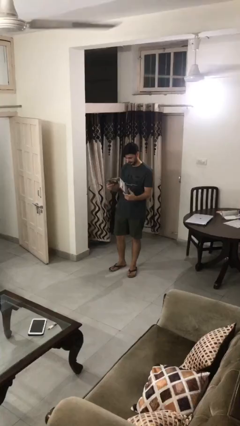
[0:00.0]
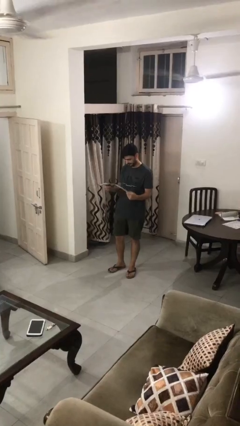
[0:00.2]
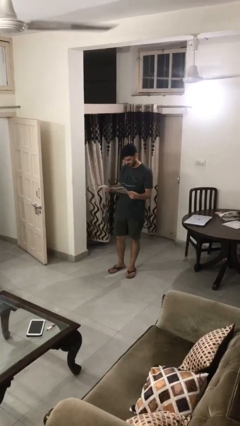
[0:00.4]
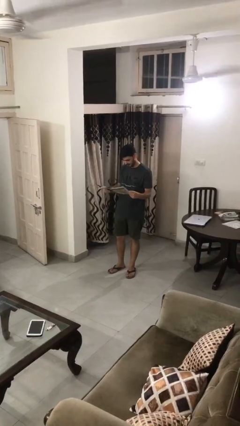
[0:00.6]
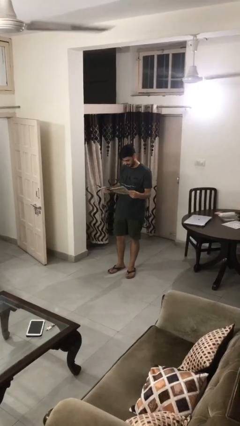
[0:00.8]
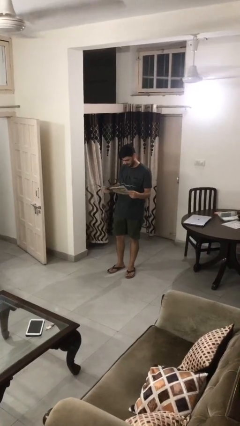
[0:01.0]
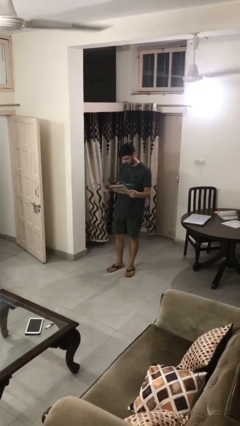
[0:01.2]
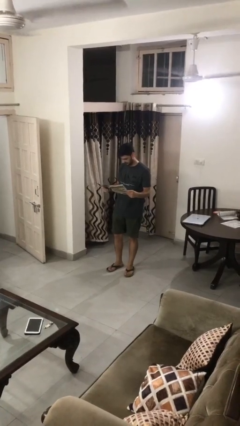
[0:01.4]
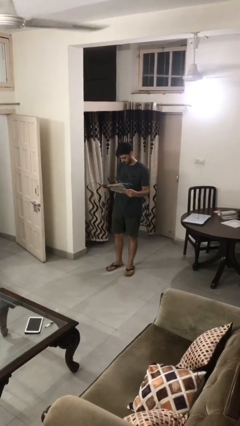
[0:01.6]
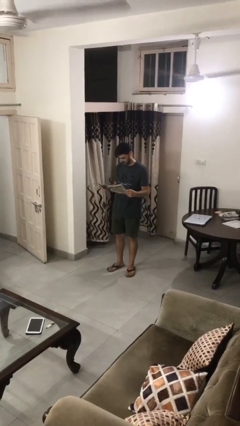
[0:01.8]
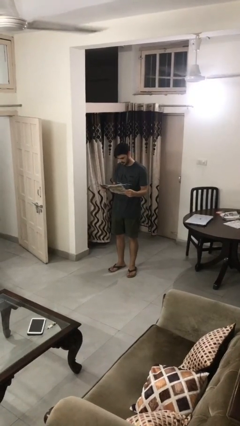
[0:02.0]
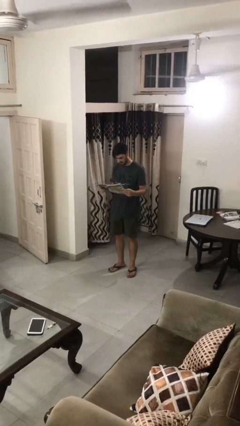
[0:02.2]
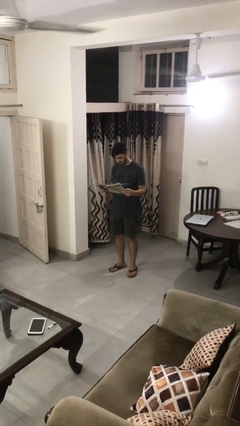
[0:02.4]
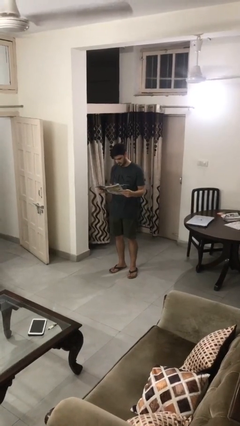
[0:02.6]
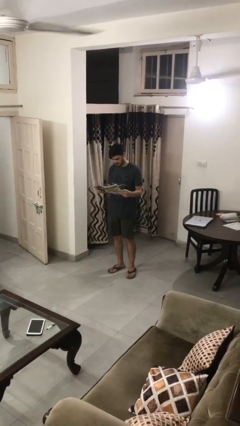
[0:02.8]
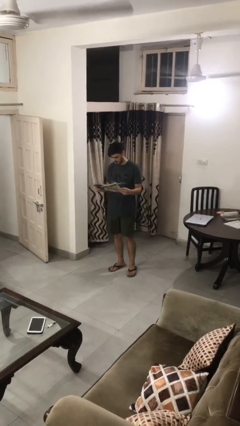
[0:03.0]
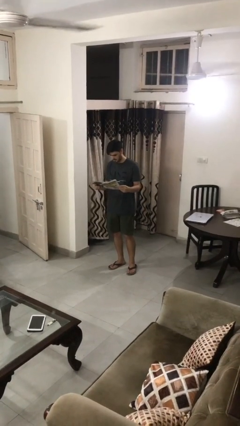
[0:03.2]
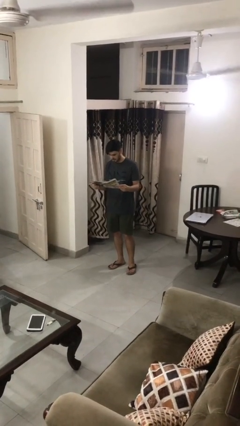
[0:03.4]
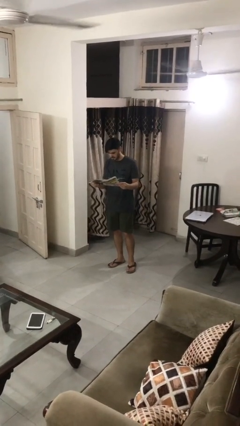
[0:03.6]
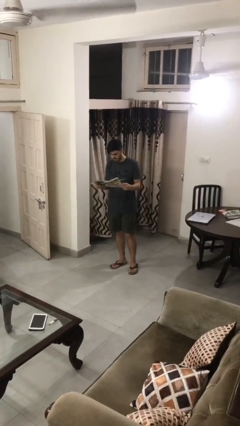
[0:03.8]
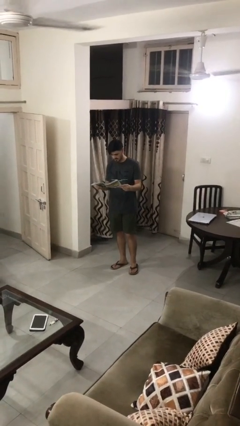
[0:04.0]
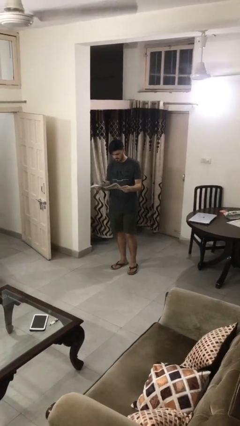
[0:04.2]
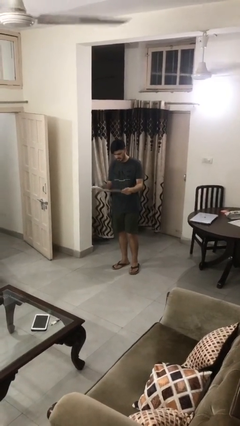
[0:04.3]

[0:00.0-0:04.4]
person reads newspaper

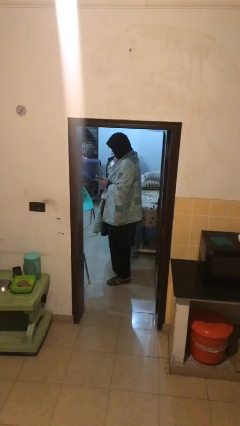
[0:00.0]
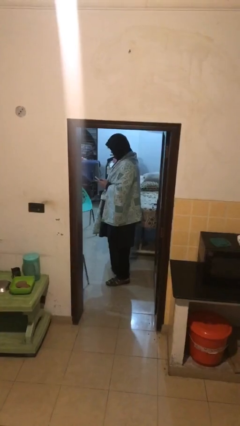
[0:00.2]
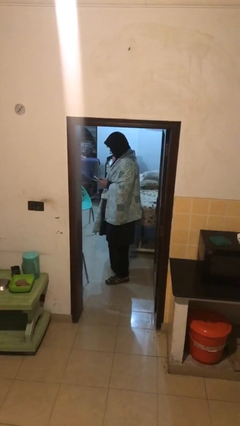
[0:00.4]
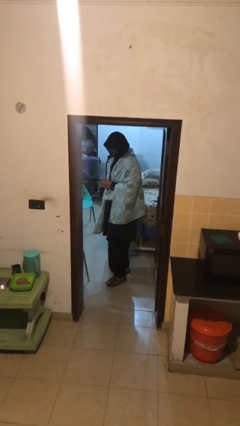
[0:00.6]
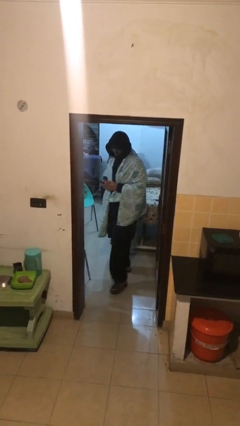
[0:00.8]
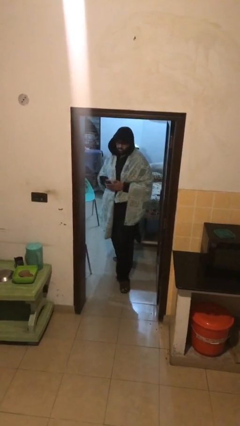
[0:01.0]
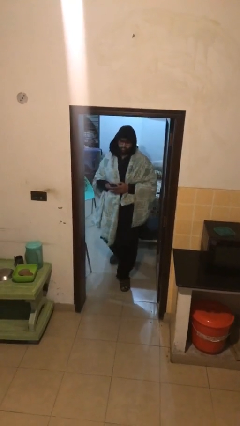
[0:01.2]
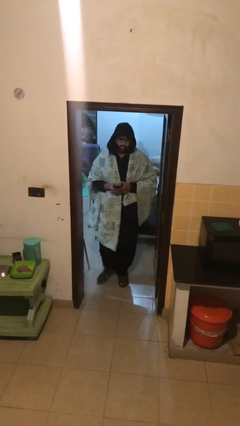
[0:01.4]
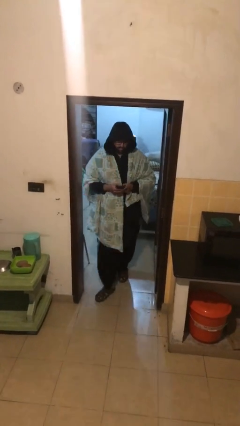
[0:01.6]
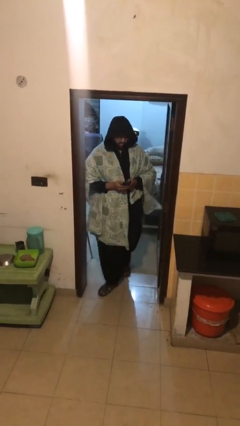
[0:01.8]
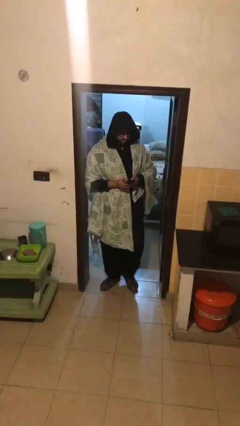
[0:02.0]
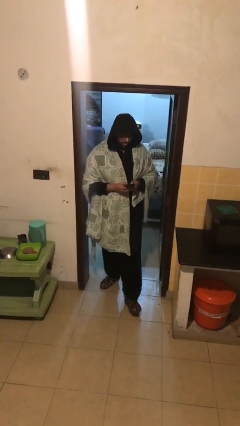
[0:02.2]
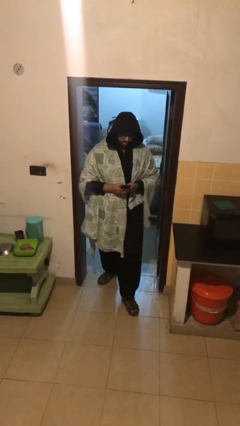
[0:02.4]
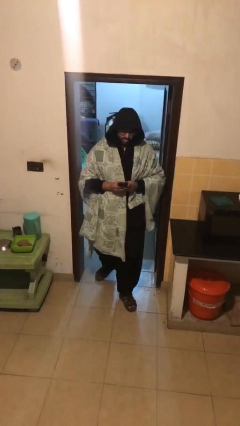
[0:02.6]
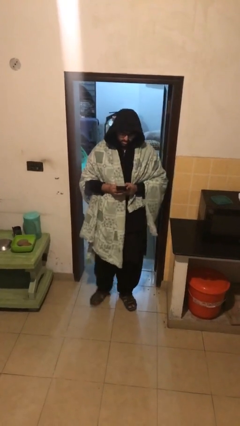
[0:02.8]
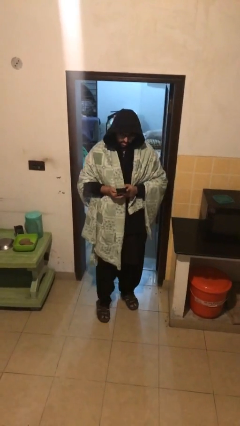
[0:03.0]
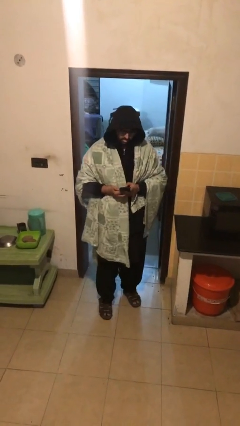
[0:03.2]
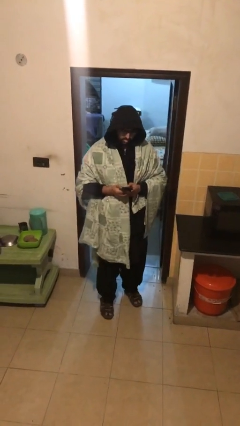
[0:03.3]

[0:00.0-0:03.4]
person enters scene through structure

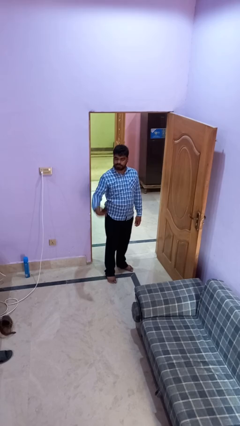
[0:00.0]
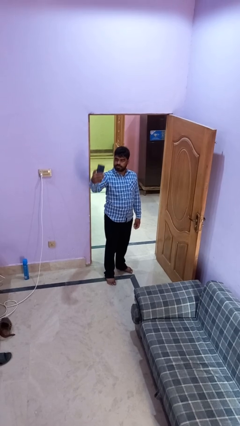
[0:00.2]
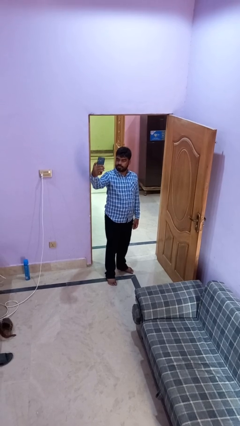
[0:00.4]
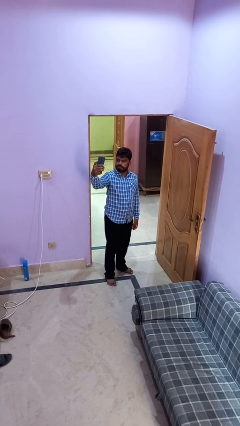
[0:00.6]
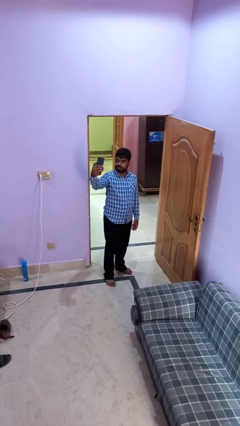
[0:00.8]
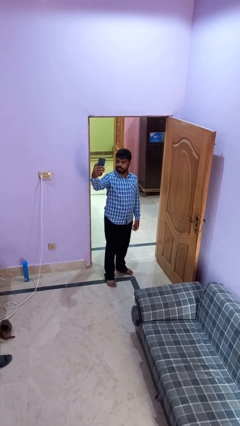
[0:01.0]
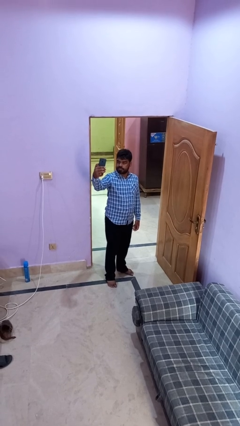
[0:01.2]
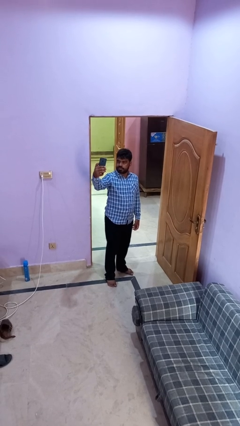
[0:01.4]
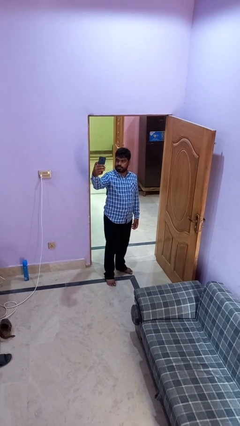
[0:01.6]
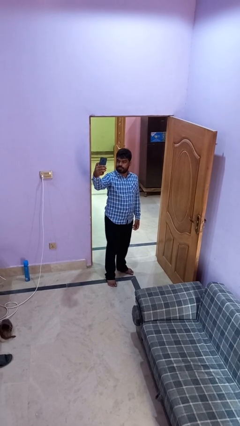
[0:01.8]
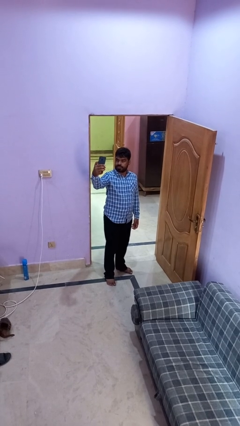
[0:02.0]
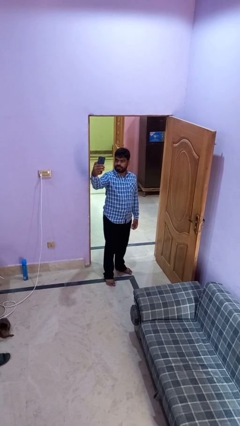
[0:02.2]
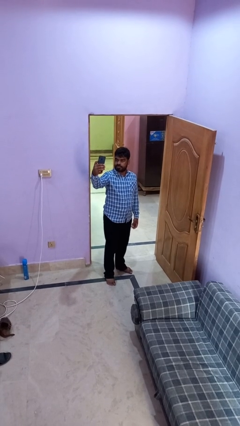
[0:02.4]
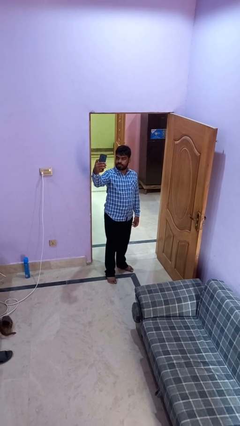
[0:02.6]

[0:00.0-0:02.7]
person takes selfie

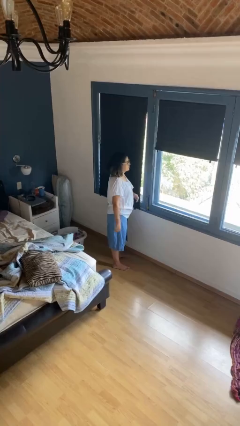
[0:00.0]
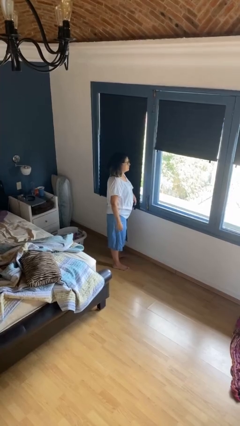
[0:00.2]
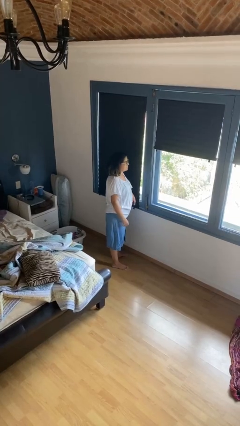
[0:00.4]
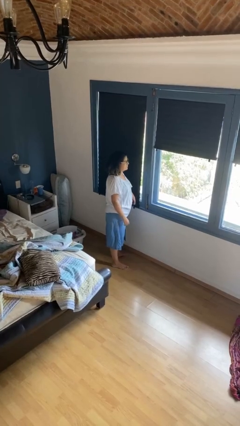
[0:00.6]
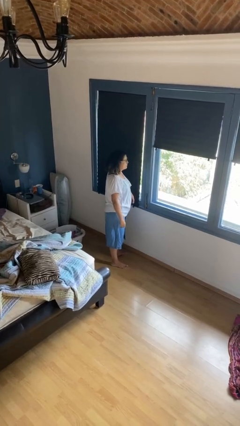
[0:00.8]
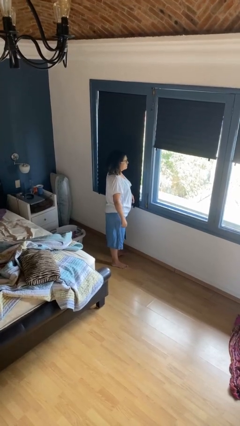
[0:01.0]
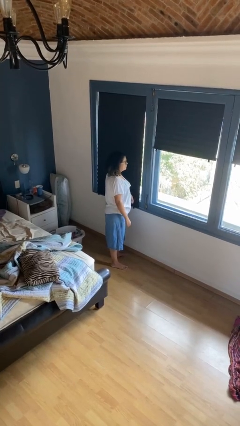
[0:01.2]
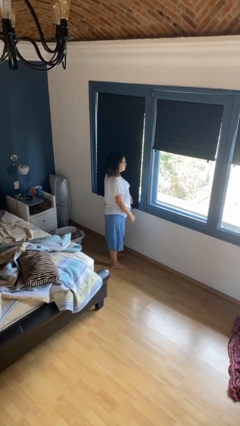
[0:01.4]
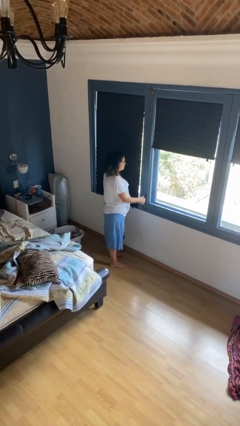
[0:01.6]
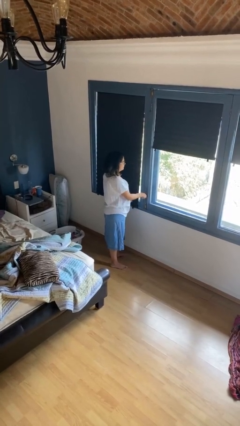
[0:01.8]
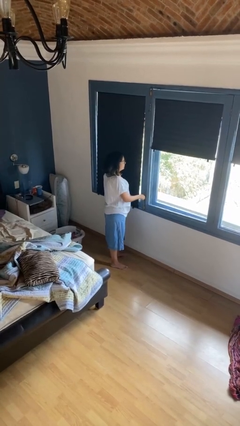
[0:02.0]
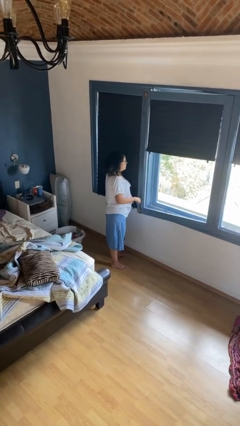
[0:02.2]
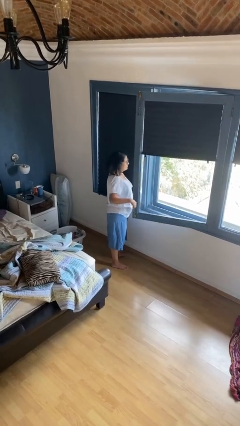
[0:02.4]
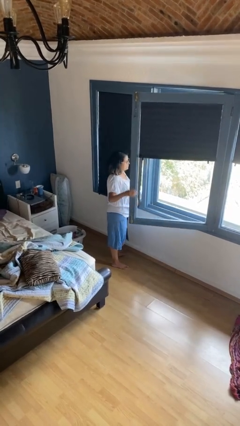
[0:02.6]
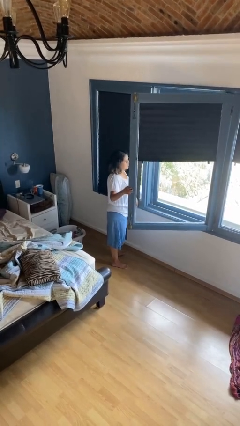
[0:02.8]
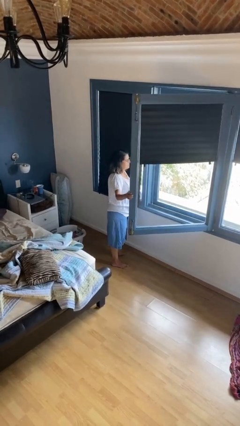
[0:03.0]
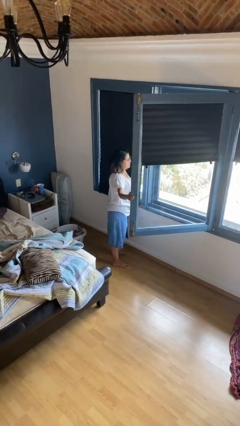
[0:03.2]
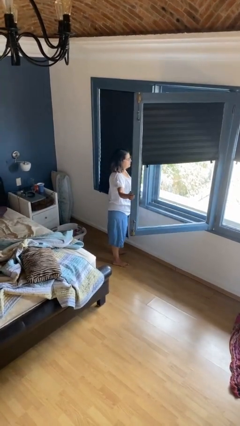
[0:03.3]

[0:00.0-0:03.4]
person opens home window

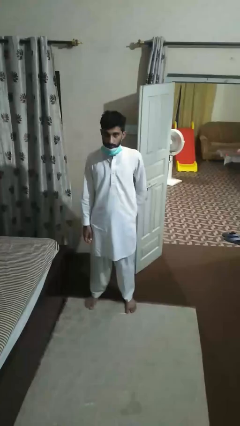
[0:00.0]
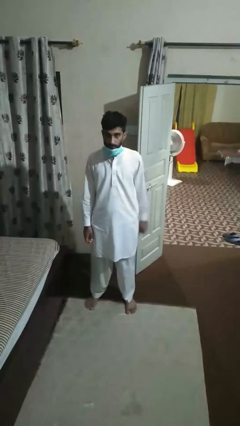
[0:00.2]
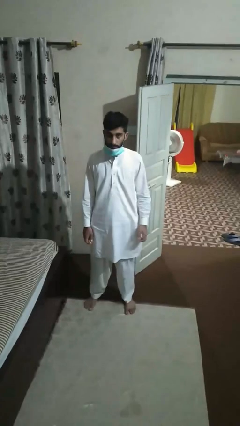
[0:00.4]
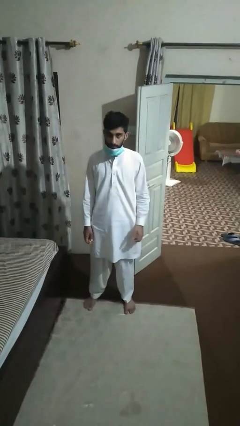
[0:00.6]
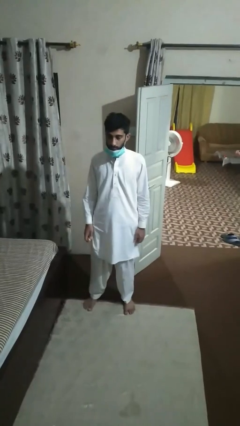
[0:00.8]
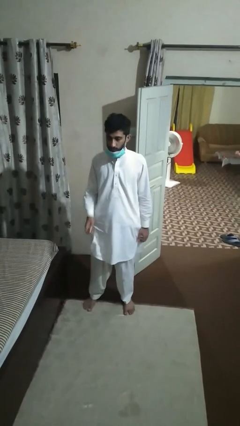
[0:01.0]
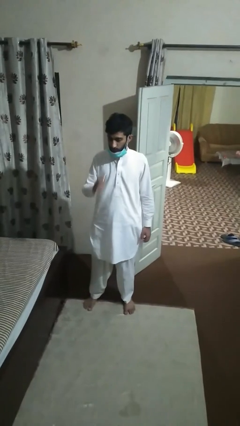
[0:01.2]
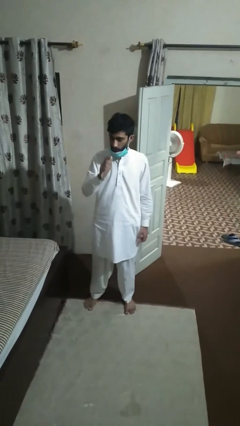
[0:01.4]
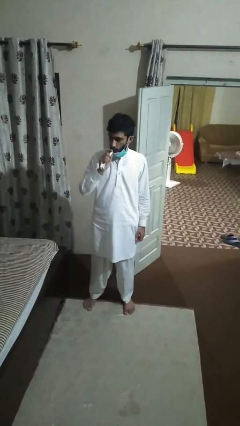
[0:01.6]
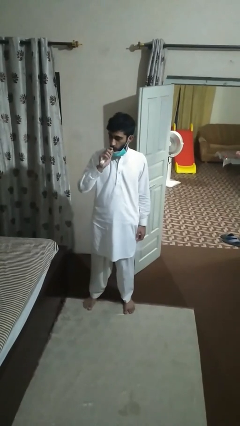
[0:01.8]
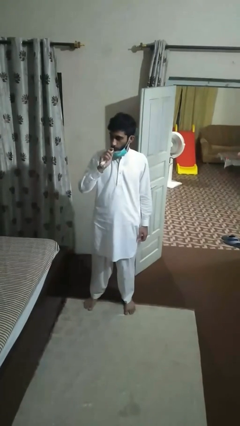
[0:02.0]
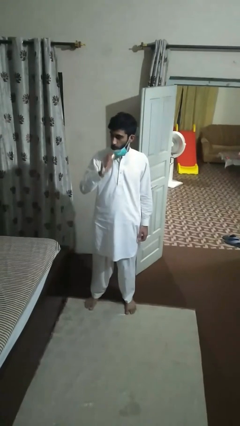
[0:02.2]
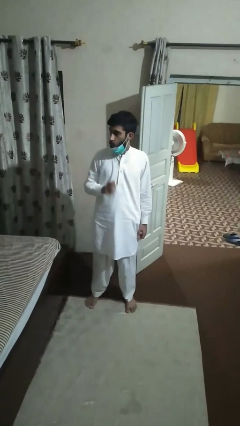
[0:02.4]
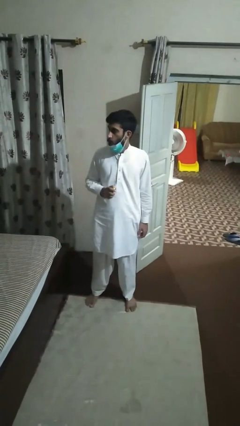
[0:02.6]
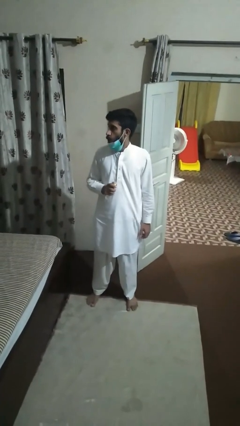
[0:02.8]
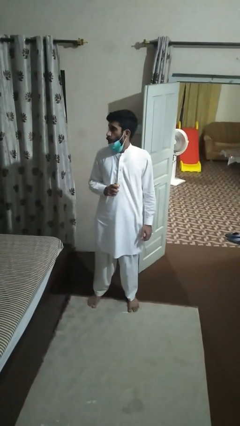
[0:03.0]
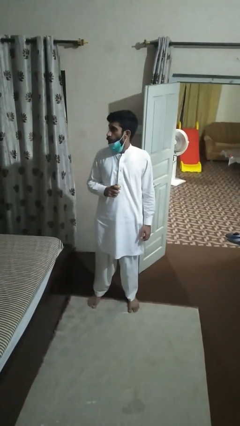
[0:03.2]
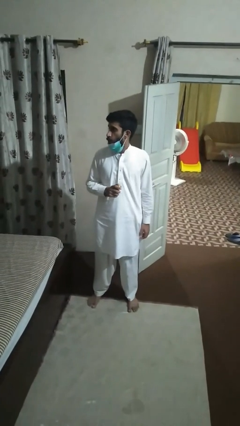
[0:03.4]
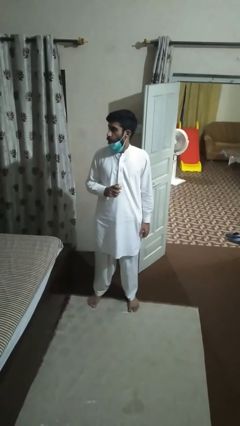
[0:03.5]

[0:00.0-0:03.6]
person vapes

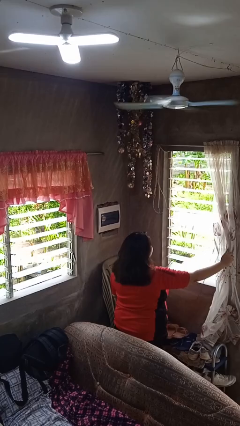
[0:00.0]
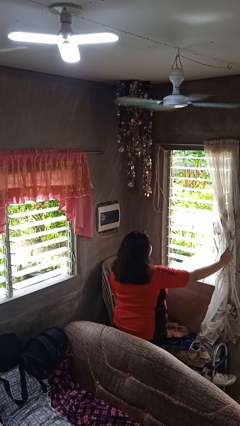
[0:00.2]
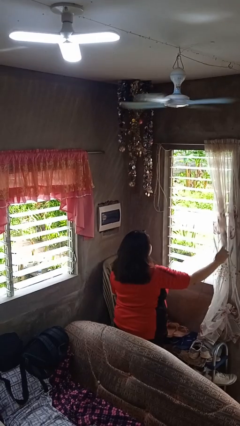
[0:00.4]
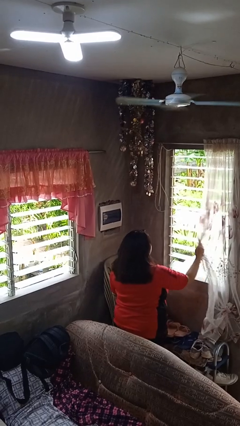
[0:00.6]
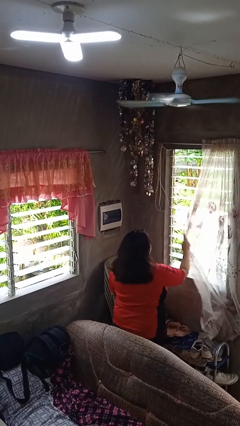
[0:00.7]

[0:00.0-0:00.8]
person closes curtains
